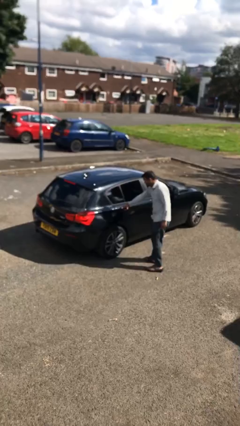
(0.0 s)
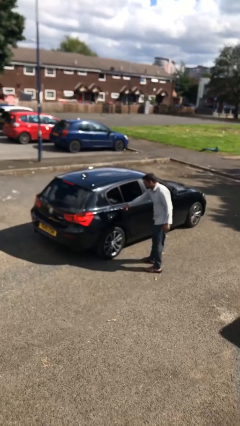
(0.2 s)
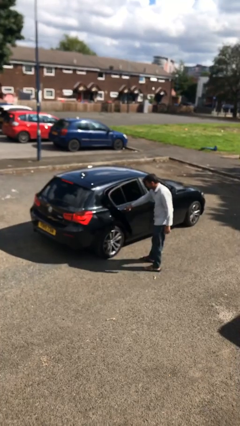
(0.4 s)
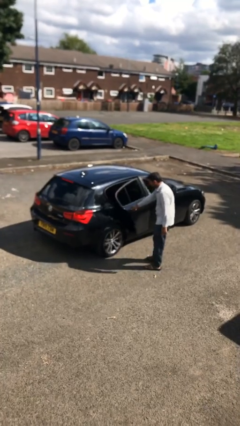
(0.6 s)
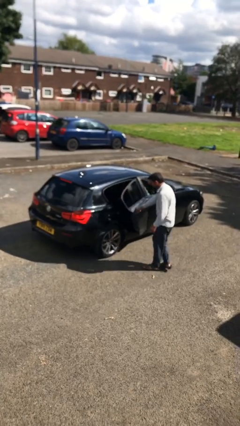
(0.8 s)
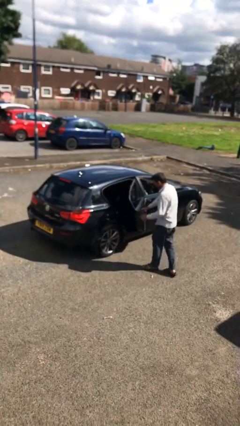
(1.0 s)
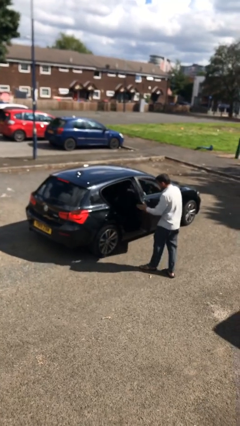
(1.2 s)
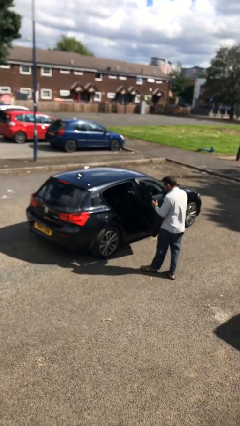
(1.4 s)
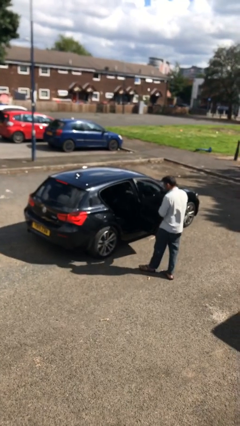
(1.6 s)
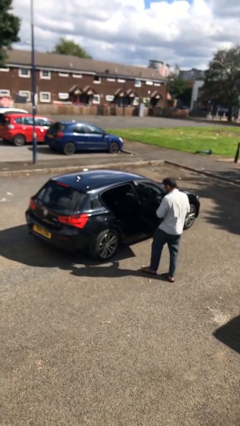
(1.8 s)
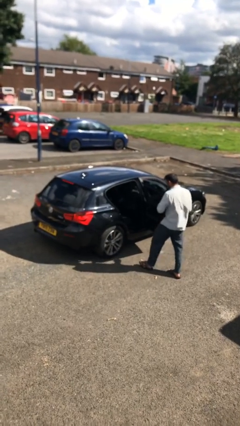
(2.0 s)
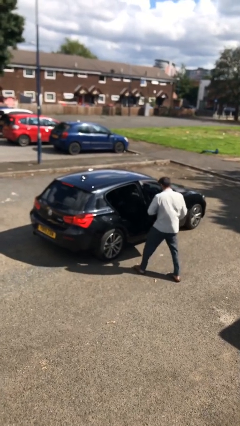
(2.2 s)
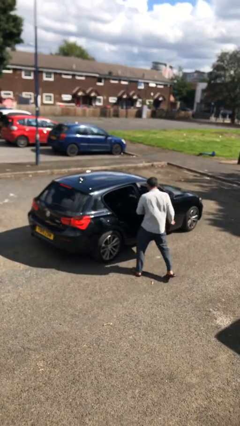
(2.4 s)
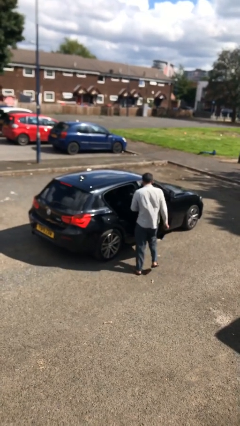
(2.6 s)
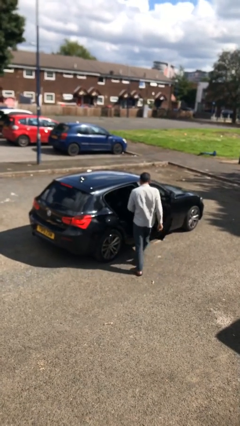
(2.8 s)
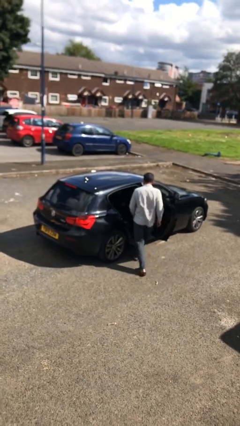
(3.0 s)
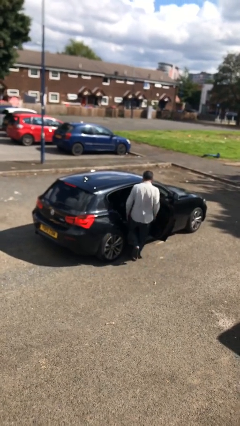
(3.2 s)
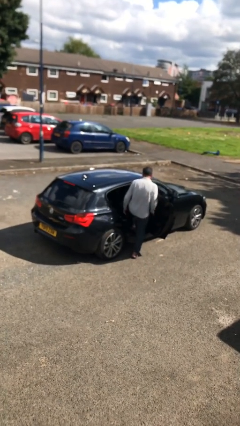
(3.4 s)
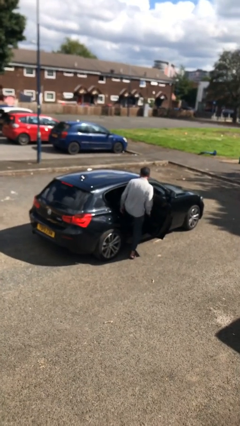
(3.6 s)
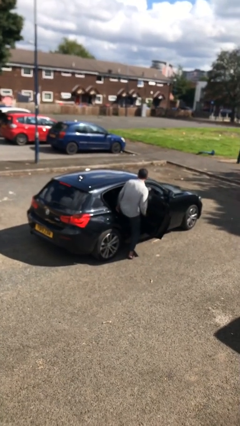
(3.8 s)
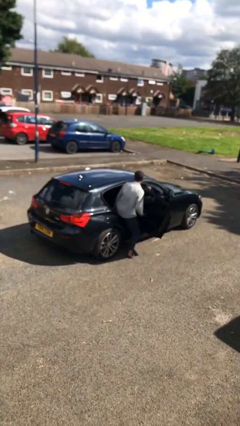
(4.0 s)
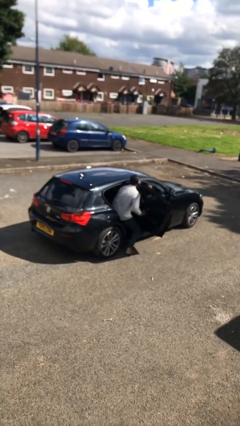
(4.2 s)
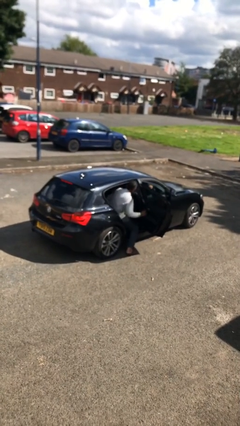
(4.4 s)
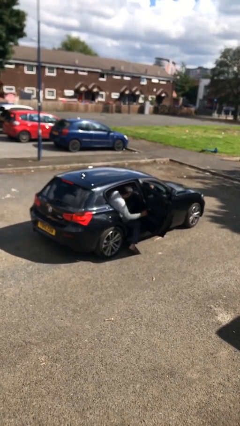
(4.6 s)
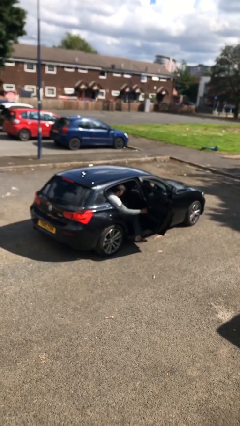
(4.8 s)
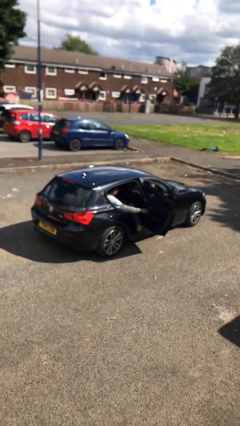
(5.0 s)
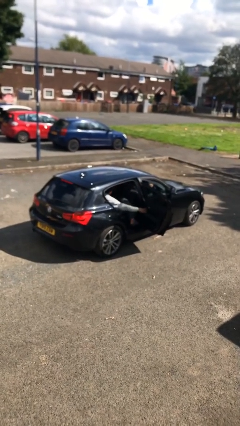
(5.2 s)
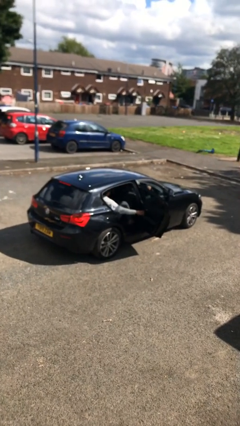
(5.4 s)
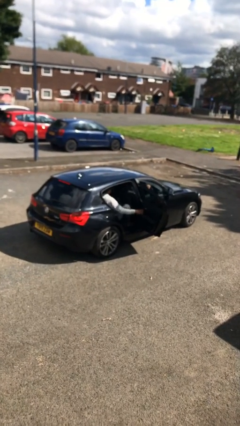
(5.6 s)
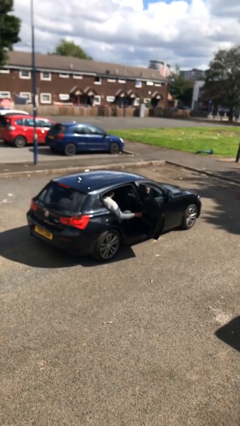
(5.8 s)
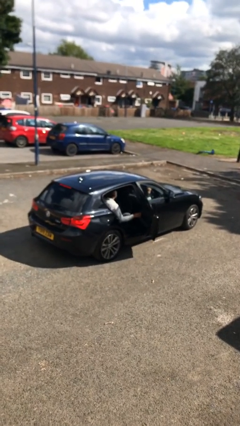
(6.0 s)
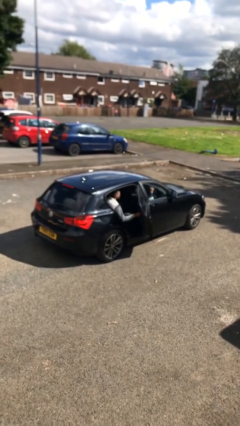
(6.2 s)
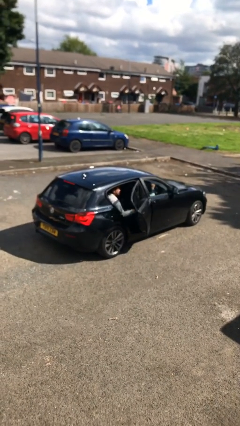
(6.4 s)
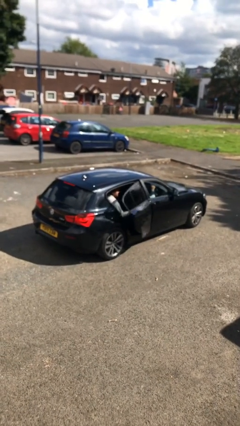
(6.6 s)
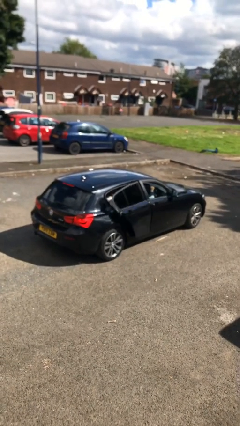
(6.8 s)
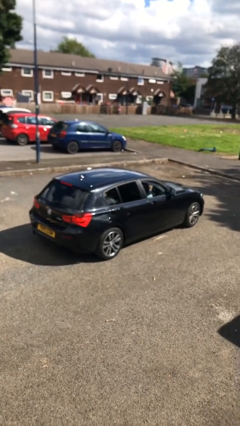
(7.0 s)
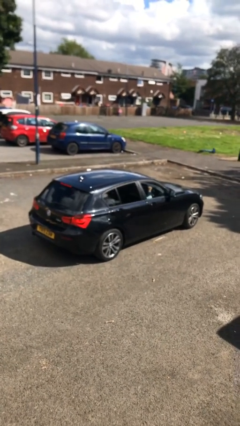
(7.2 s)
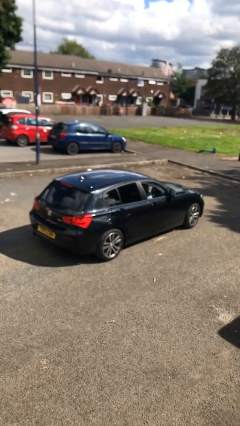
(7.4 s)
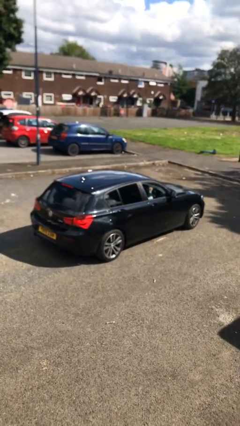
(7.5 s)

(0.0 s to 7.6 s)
car picks up person

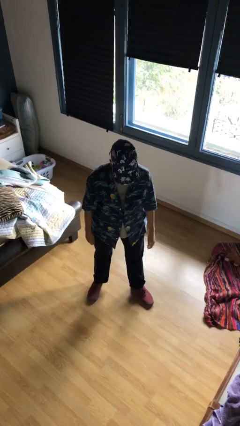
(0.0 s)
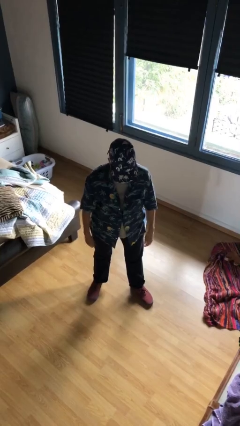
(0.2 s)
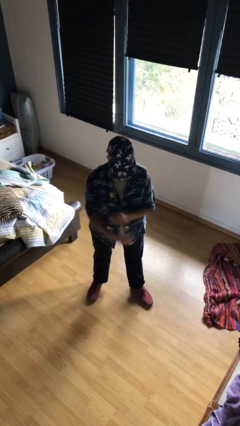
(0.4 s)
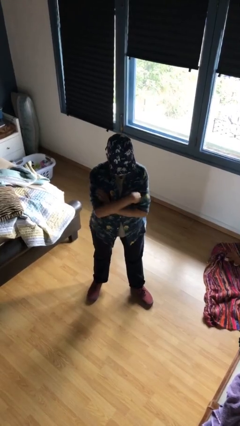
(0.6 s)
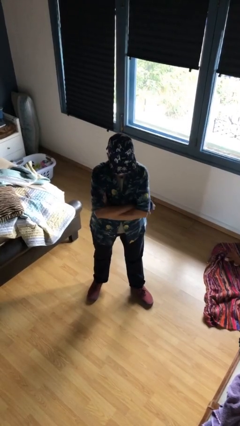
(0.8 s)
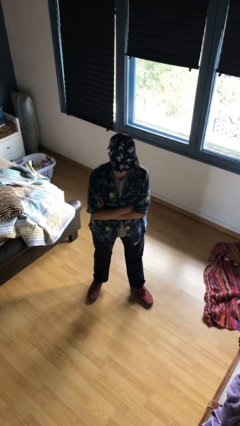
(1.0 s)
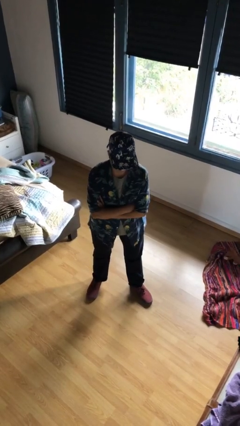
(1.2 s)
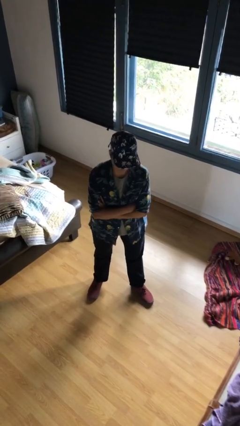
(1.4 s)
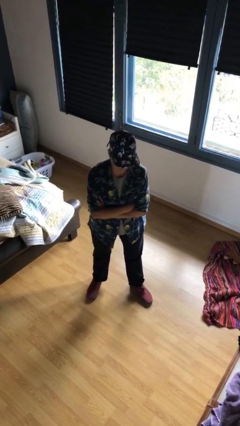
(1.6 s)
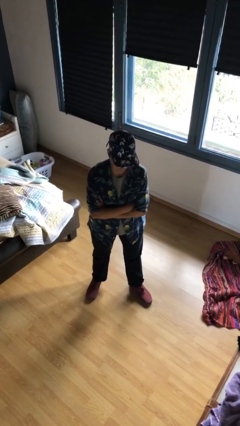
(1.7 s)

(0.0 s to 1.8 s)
person crosses arms

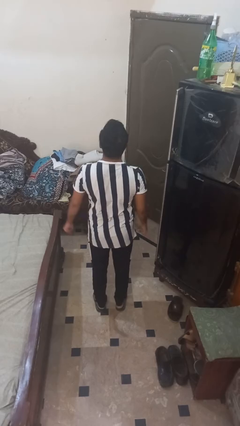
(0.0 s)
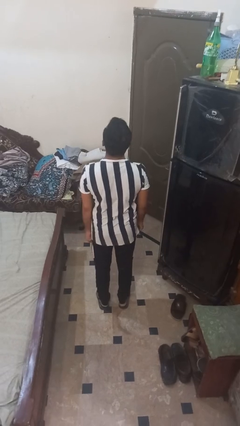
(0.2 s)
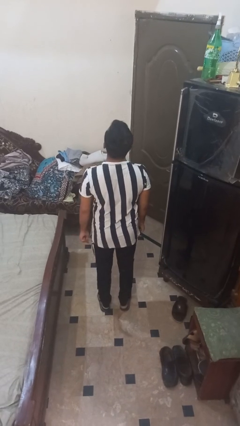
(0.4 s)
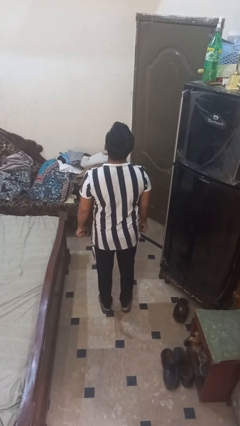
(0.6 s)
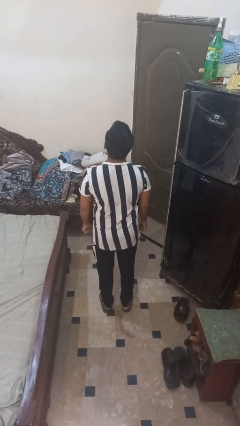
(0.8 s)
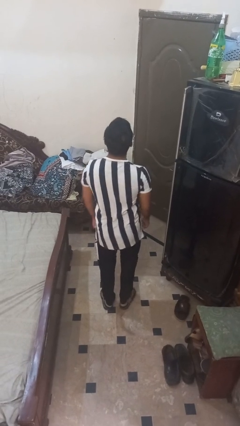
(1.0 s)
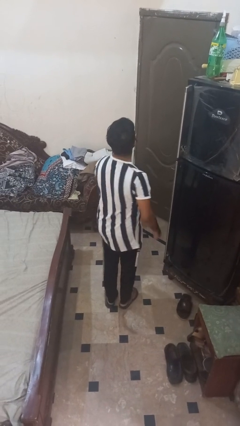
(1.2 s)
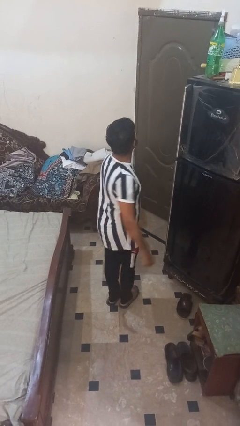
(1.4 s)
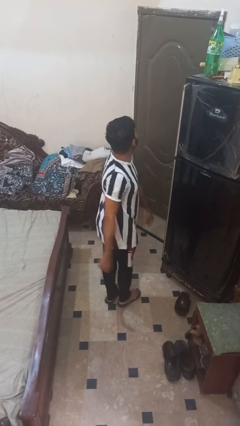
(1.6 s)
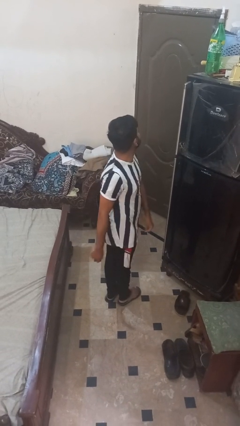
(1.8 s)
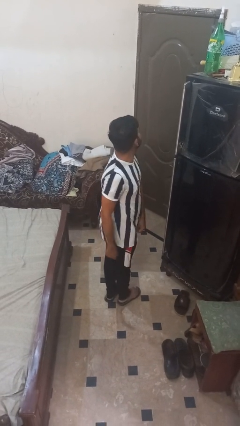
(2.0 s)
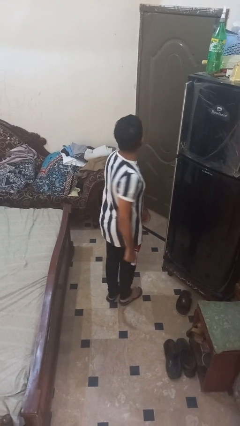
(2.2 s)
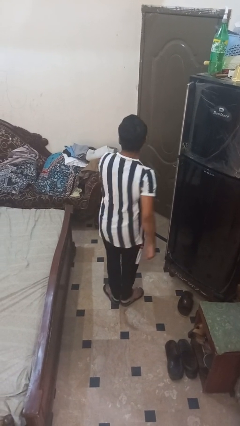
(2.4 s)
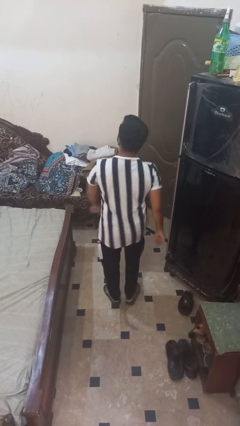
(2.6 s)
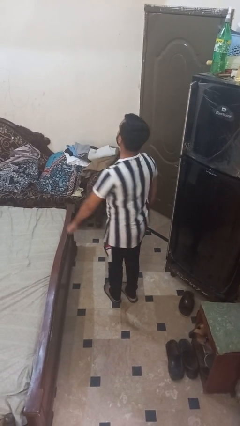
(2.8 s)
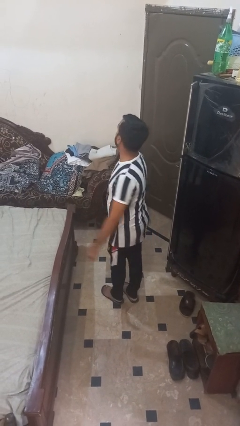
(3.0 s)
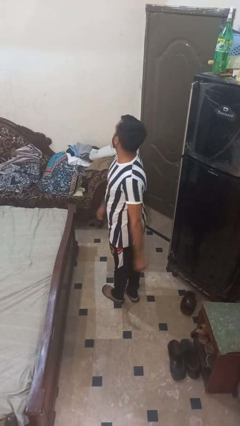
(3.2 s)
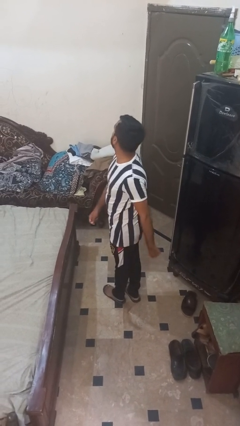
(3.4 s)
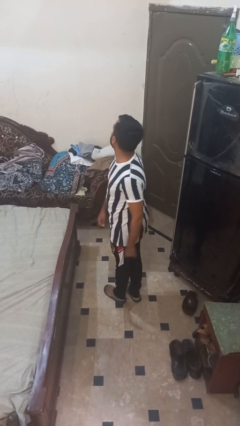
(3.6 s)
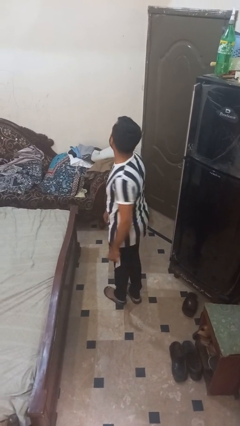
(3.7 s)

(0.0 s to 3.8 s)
person twirls

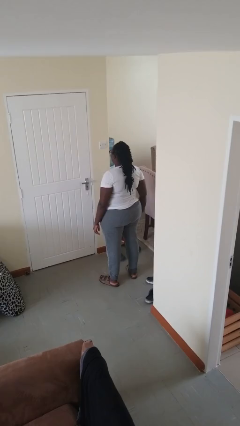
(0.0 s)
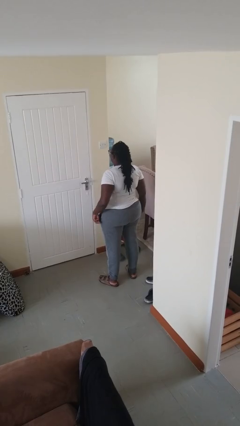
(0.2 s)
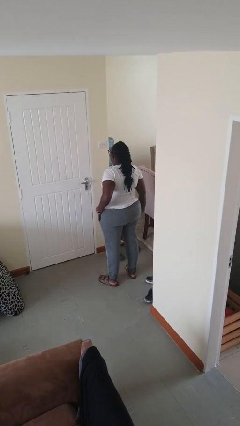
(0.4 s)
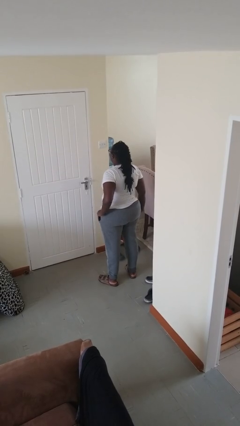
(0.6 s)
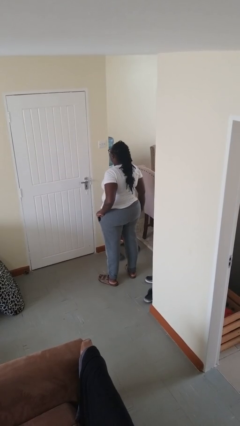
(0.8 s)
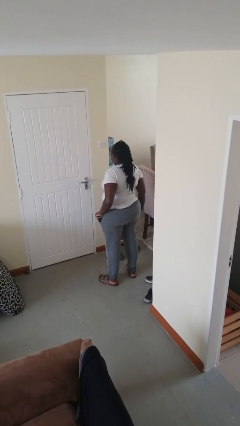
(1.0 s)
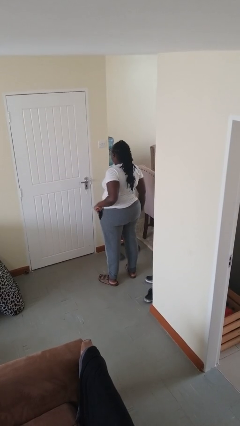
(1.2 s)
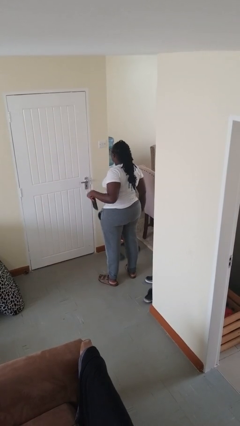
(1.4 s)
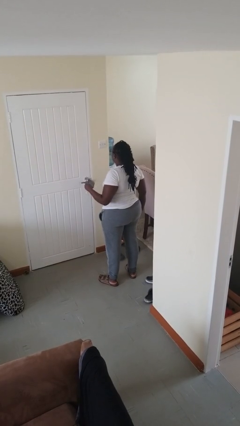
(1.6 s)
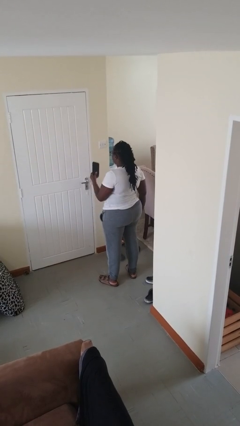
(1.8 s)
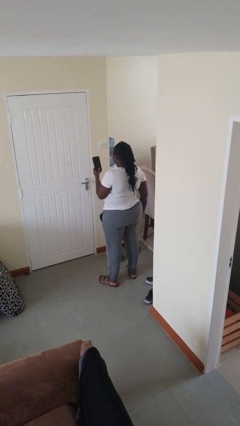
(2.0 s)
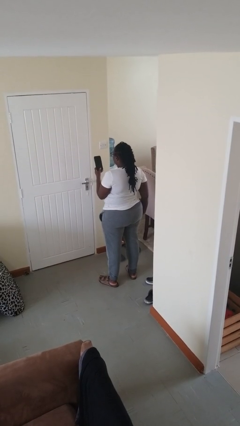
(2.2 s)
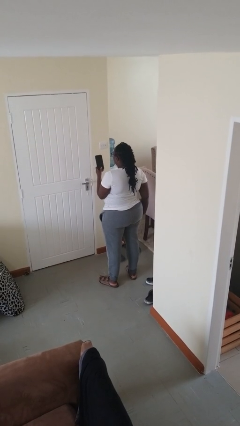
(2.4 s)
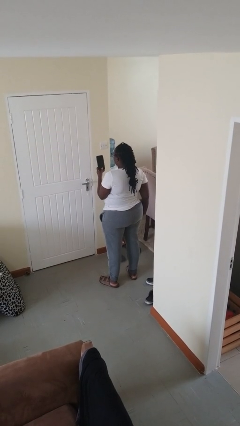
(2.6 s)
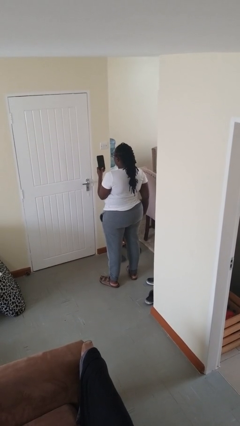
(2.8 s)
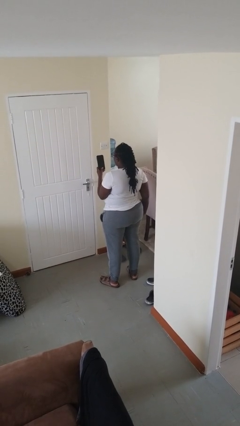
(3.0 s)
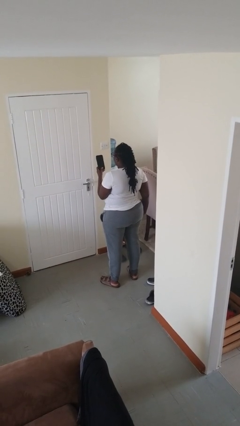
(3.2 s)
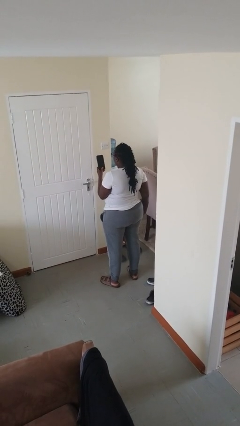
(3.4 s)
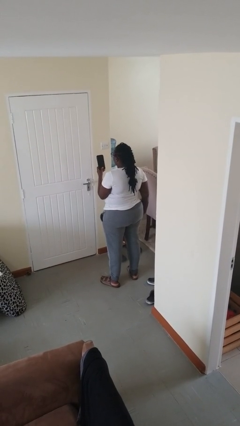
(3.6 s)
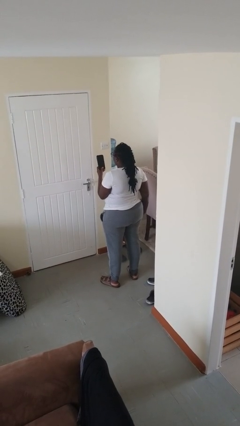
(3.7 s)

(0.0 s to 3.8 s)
person takes phone from pocket

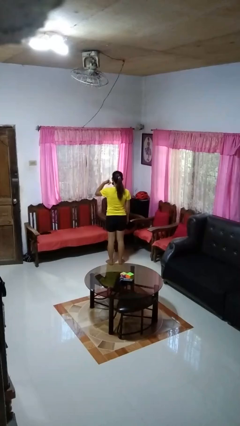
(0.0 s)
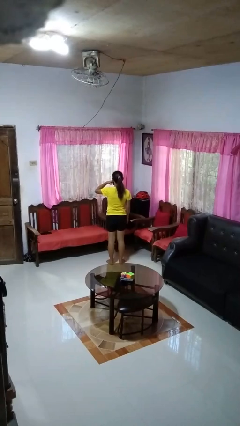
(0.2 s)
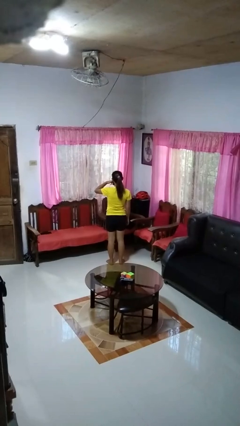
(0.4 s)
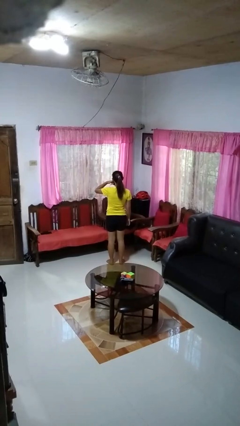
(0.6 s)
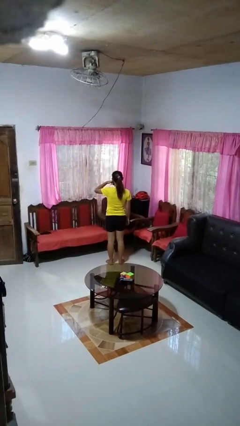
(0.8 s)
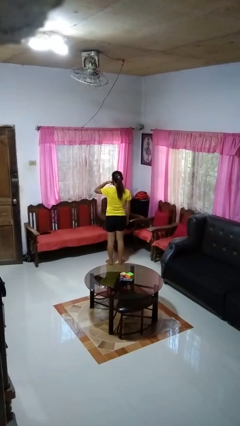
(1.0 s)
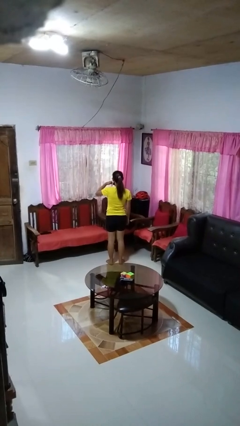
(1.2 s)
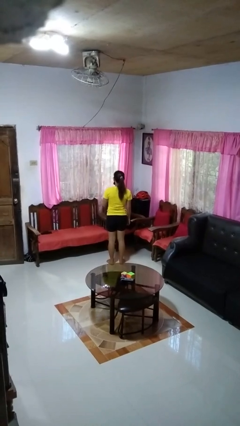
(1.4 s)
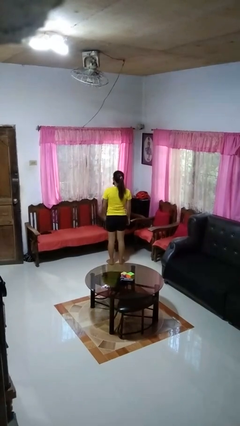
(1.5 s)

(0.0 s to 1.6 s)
person gestures call me
